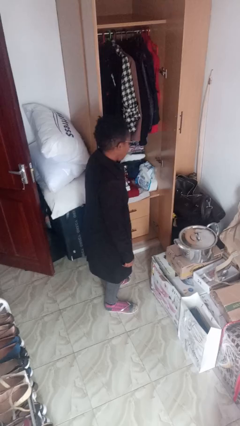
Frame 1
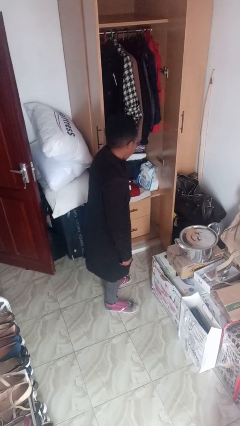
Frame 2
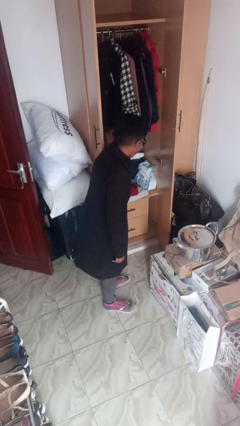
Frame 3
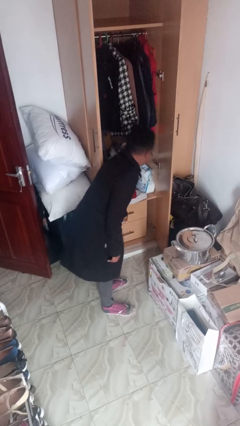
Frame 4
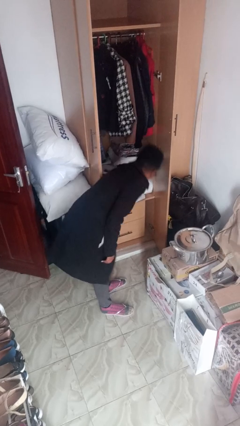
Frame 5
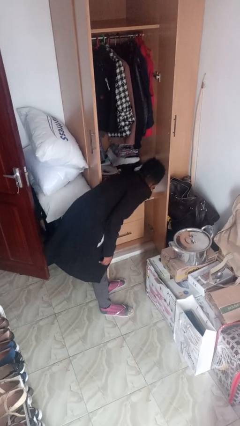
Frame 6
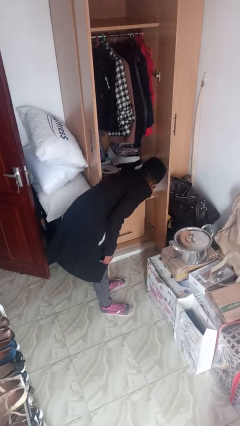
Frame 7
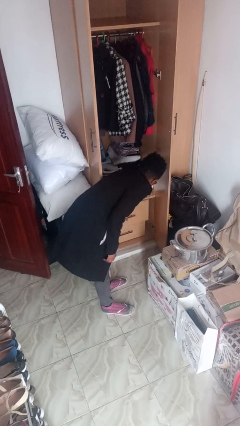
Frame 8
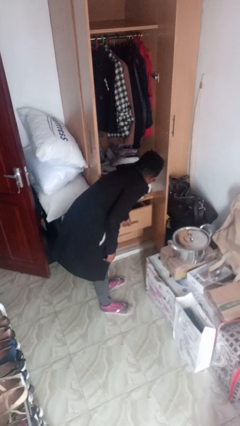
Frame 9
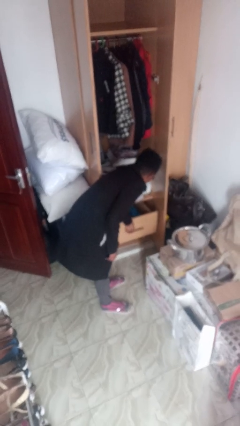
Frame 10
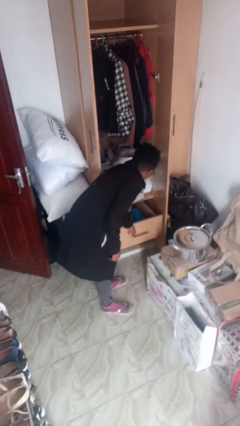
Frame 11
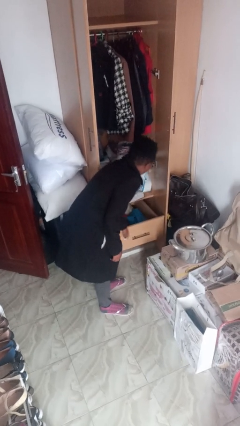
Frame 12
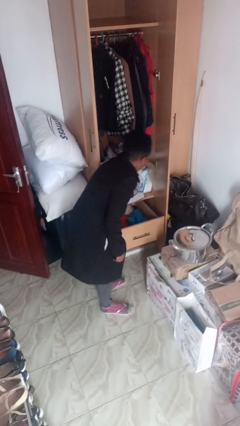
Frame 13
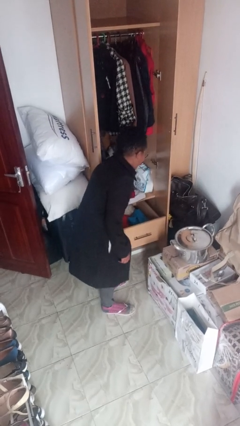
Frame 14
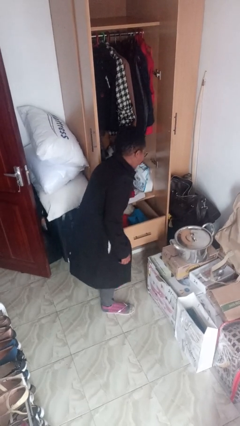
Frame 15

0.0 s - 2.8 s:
person opens dresser drawer

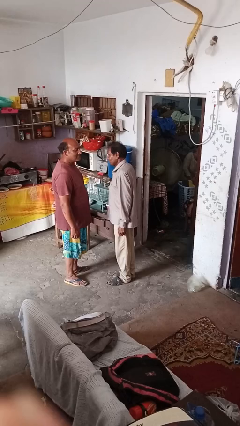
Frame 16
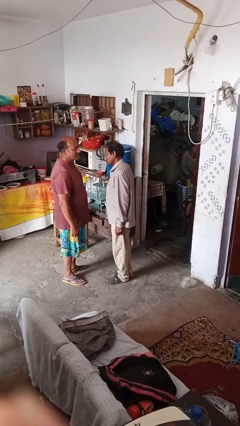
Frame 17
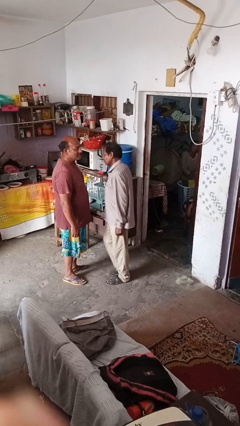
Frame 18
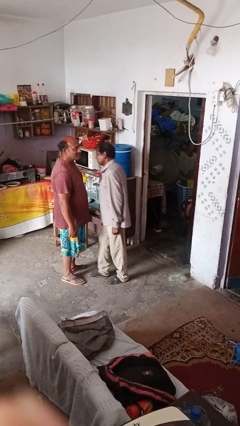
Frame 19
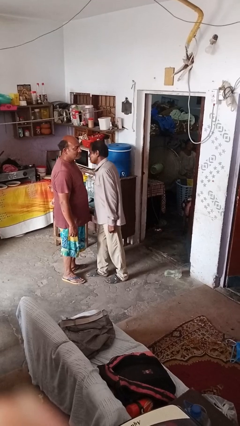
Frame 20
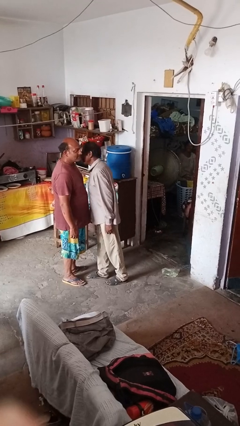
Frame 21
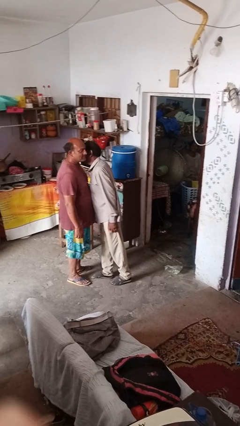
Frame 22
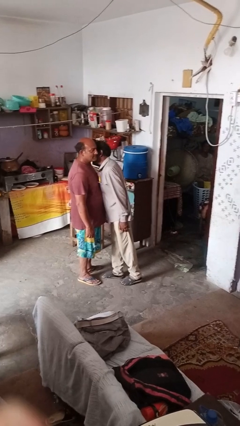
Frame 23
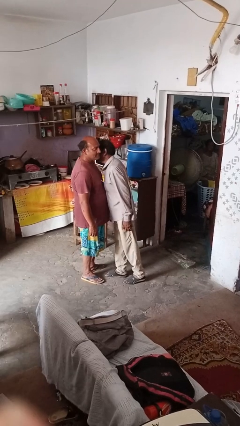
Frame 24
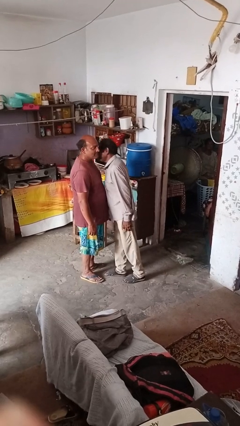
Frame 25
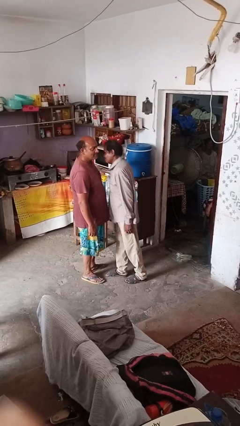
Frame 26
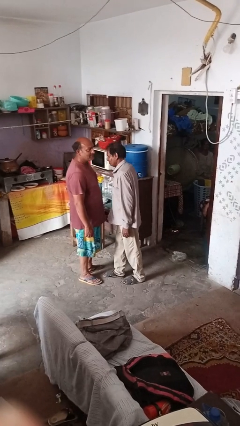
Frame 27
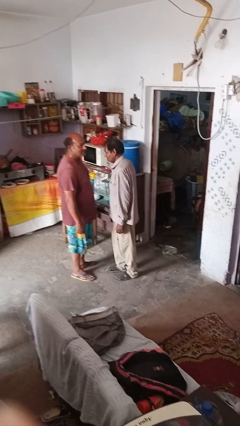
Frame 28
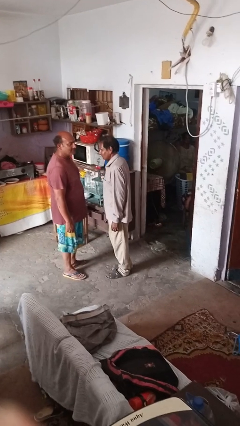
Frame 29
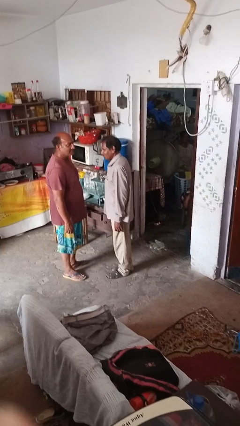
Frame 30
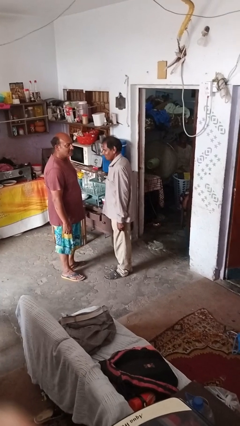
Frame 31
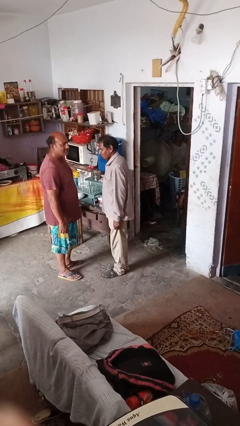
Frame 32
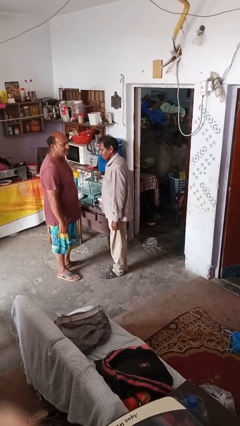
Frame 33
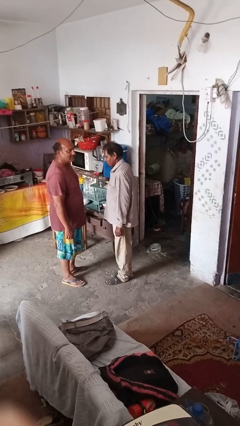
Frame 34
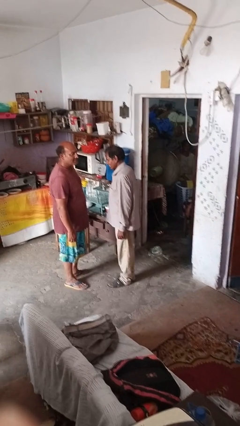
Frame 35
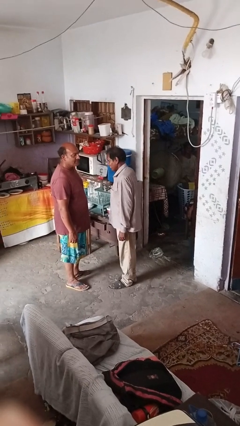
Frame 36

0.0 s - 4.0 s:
person kisses cheek of person

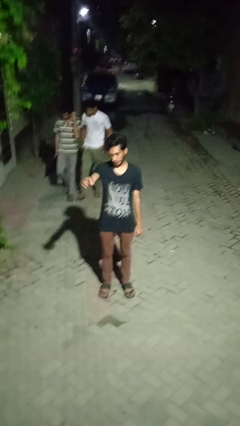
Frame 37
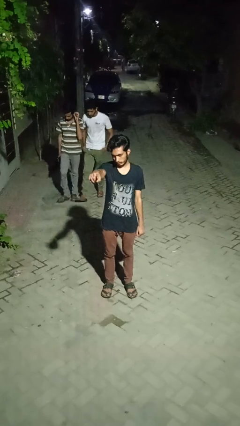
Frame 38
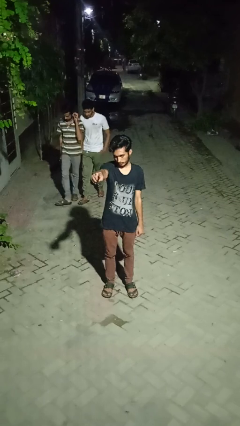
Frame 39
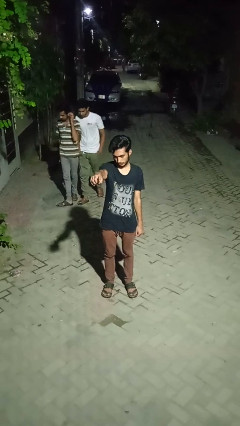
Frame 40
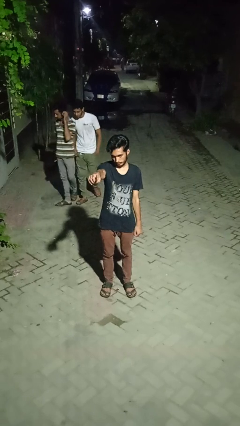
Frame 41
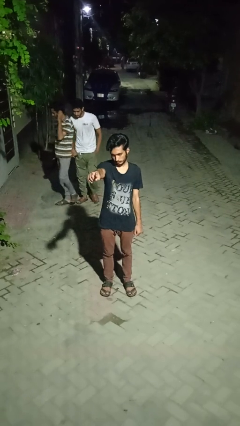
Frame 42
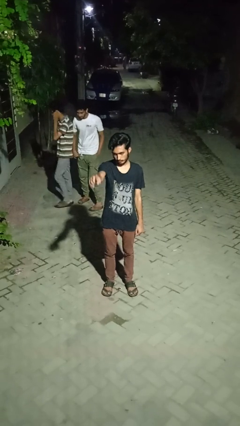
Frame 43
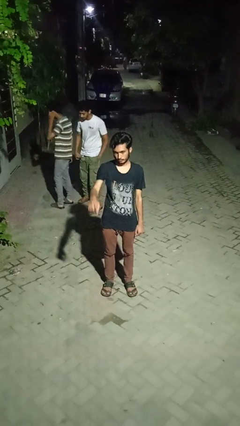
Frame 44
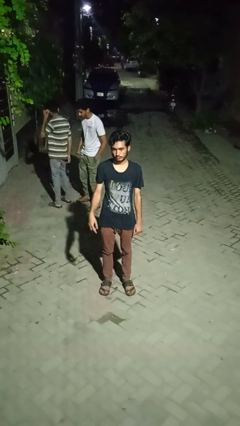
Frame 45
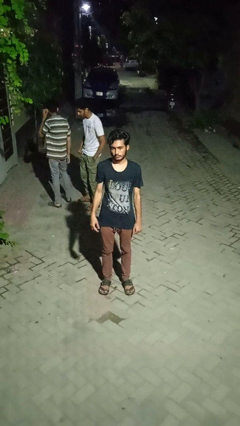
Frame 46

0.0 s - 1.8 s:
person points at person

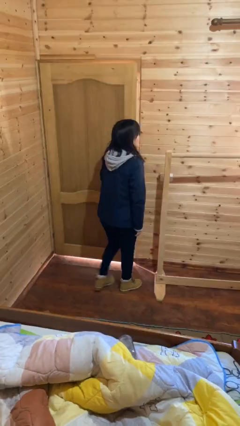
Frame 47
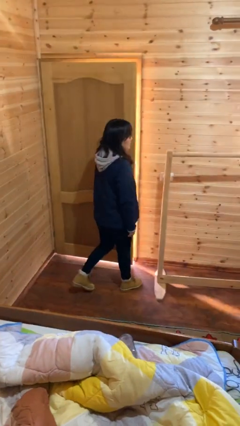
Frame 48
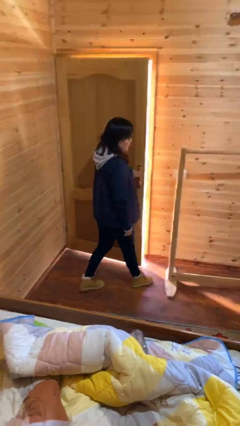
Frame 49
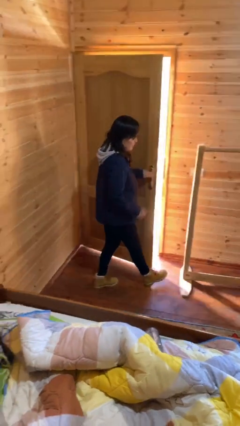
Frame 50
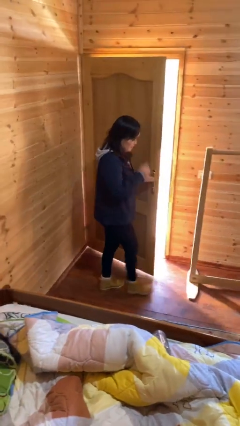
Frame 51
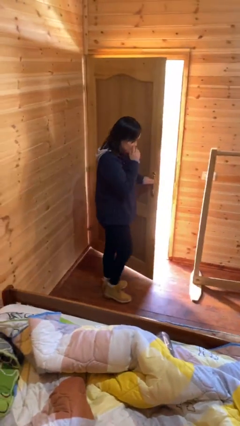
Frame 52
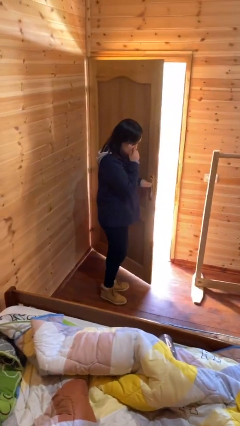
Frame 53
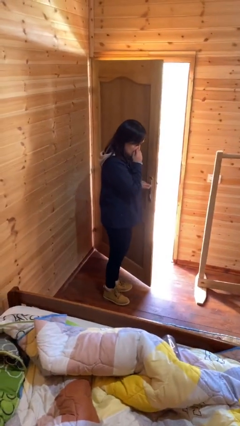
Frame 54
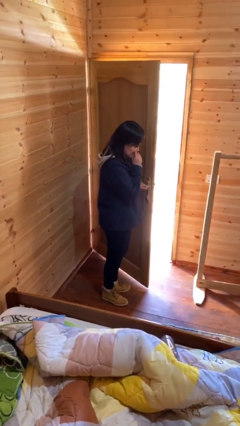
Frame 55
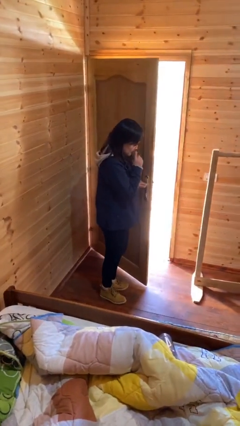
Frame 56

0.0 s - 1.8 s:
person opens facility door

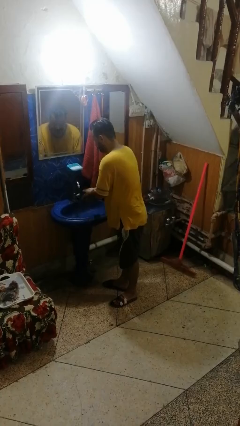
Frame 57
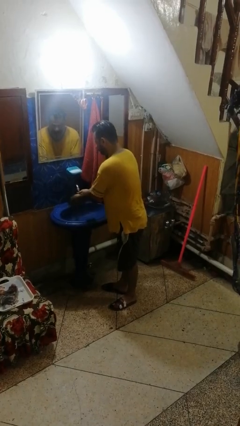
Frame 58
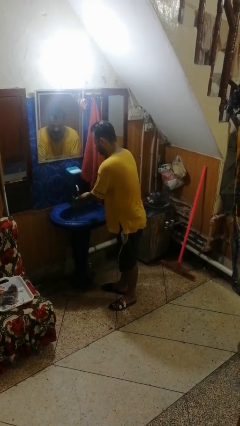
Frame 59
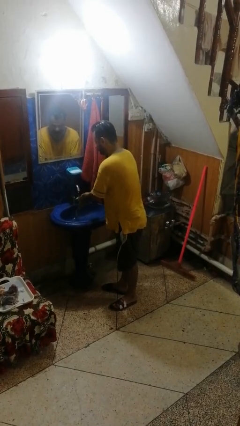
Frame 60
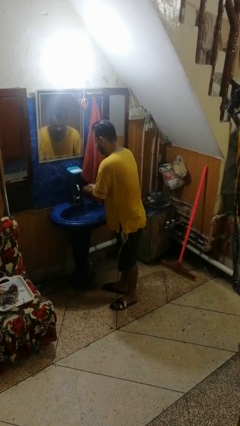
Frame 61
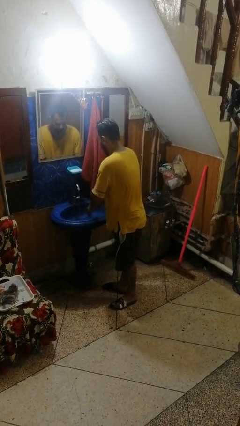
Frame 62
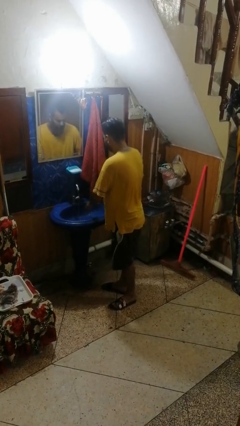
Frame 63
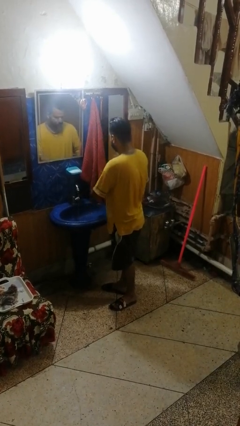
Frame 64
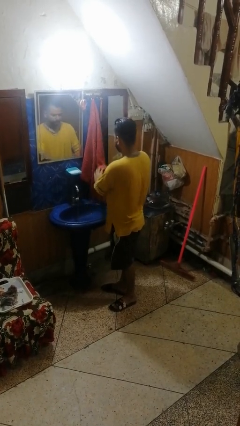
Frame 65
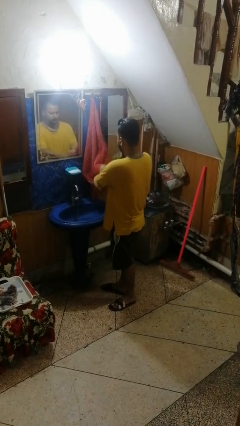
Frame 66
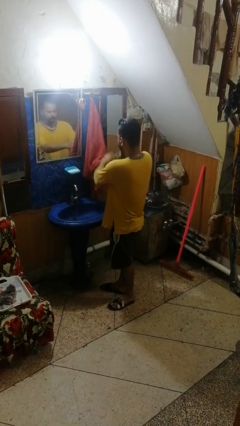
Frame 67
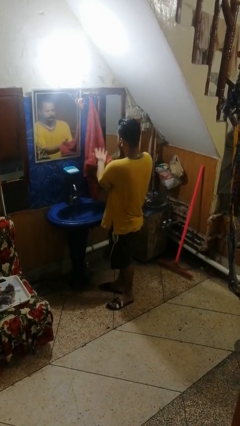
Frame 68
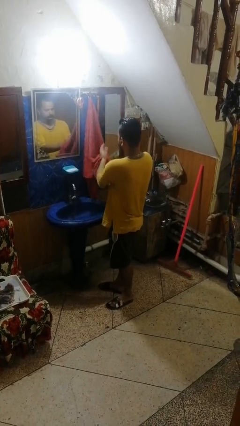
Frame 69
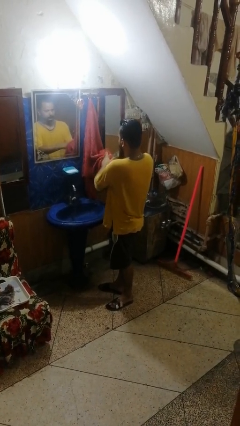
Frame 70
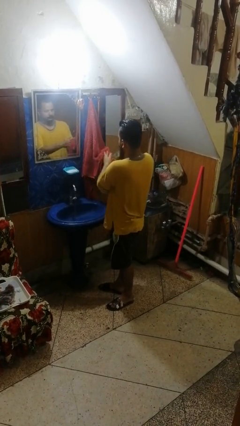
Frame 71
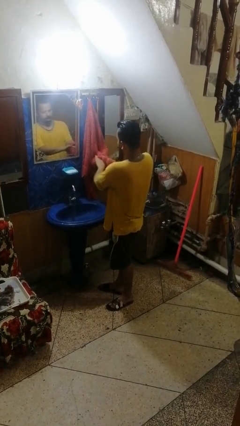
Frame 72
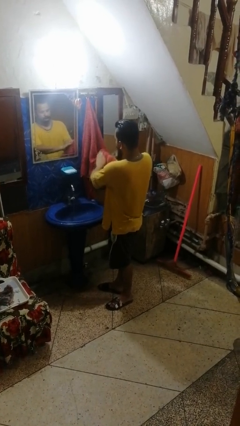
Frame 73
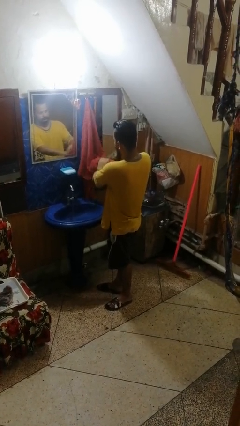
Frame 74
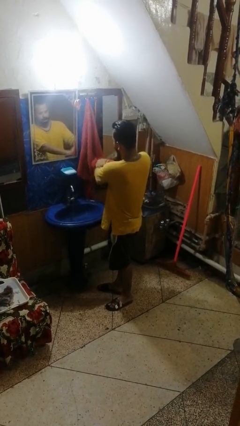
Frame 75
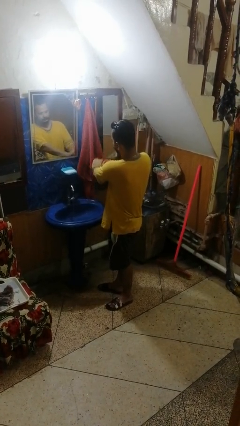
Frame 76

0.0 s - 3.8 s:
person dries hands with towel

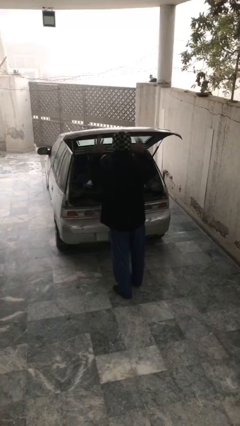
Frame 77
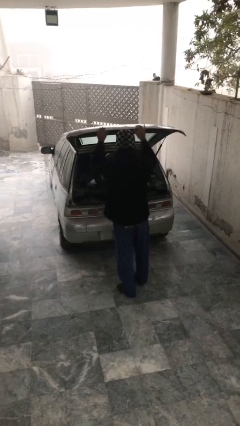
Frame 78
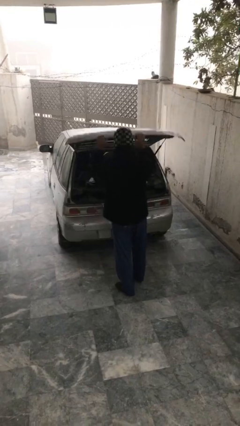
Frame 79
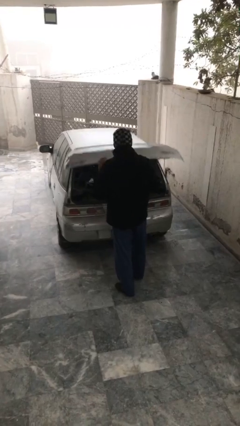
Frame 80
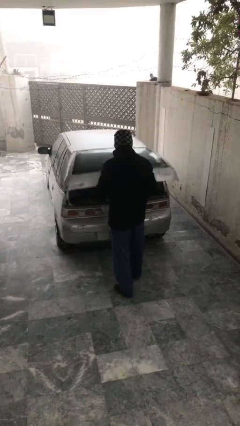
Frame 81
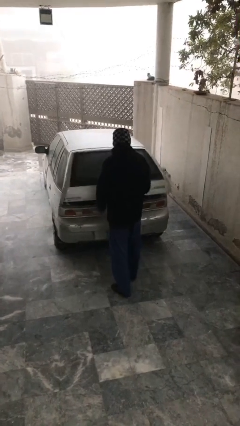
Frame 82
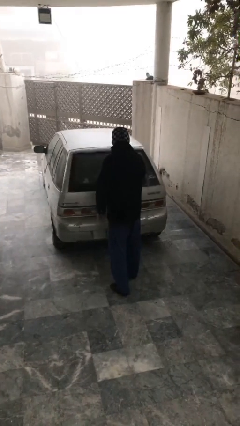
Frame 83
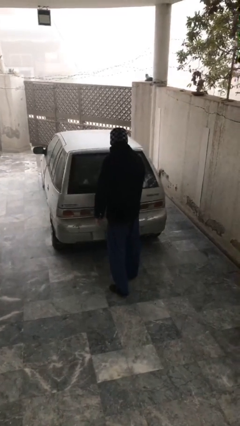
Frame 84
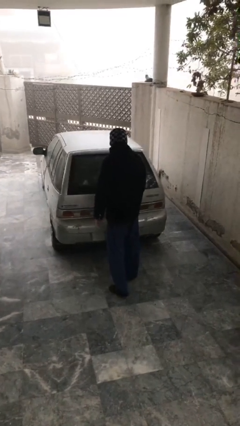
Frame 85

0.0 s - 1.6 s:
person closes car trunk

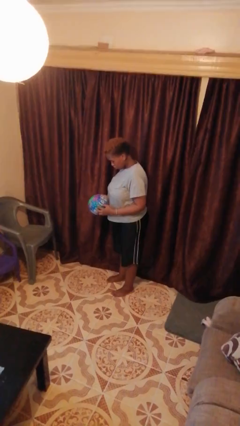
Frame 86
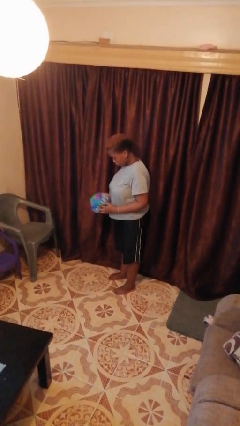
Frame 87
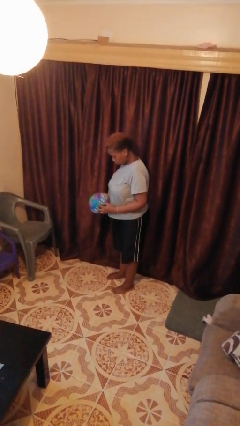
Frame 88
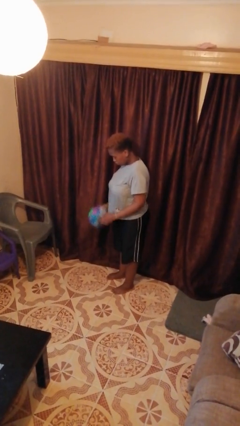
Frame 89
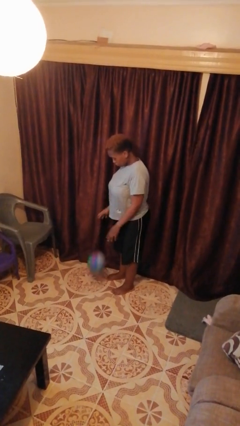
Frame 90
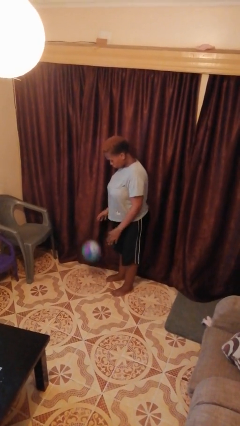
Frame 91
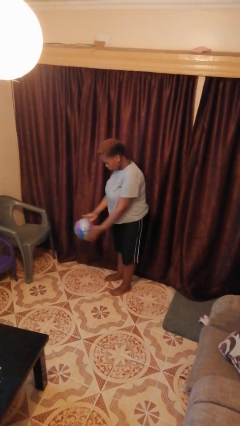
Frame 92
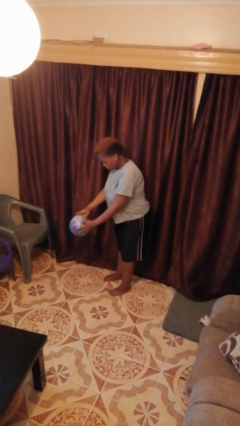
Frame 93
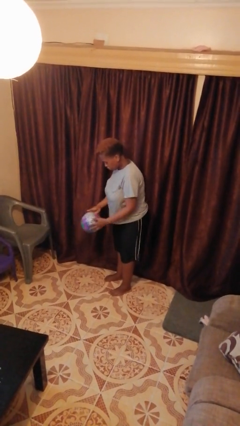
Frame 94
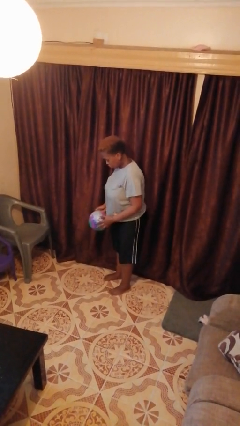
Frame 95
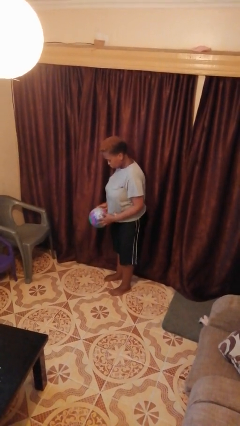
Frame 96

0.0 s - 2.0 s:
person bounces ball on floor
